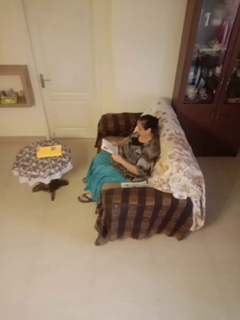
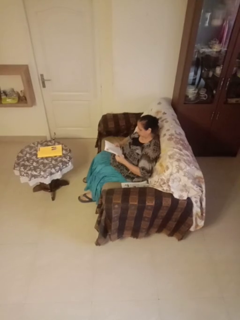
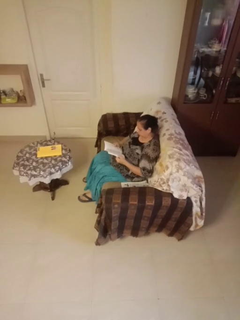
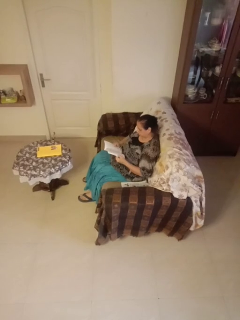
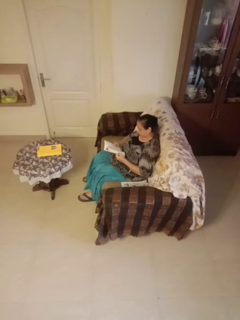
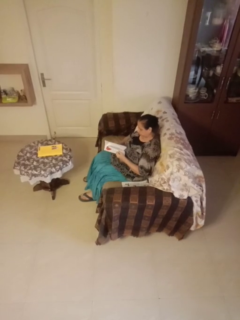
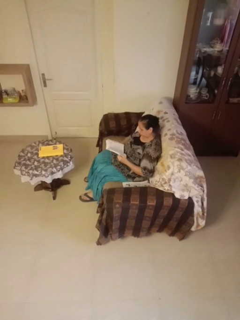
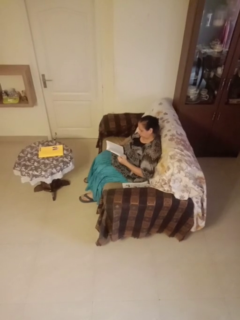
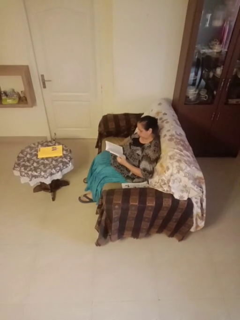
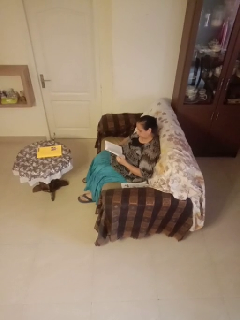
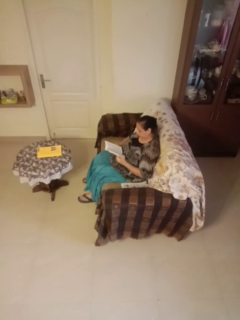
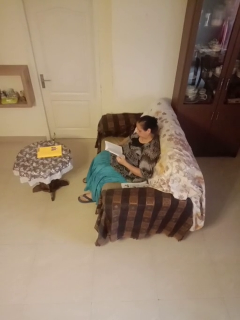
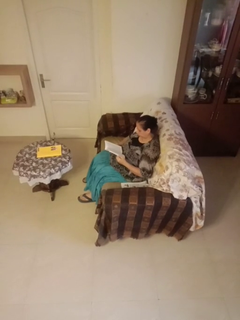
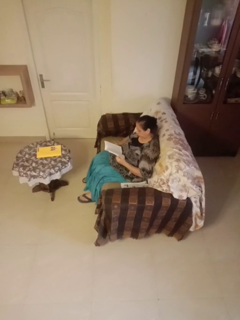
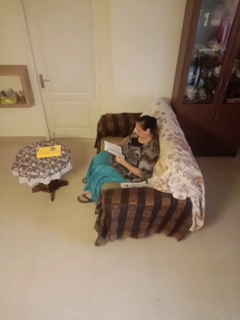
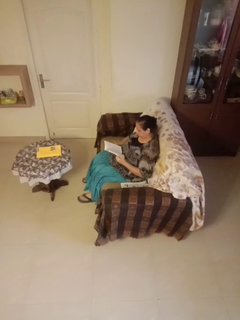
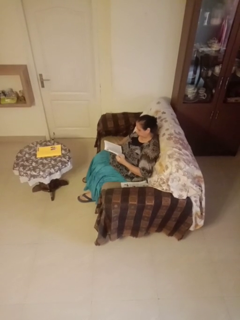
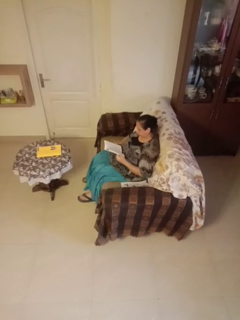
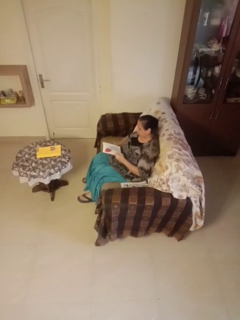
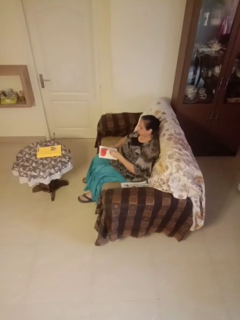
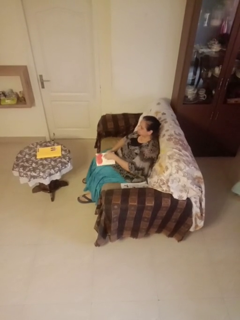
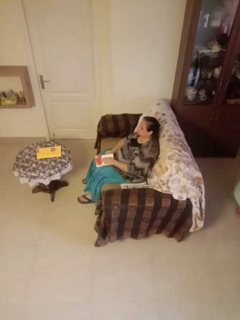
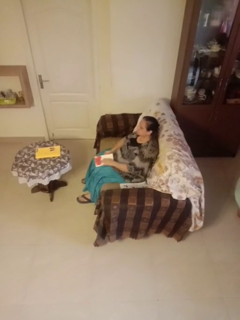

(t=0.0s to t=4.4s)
person reads book

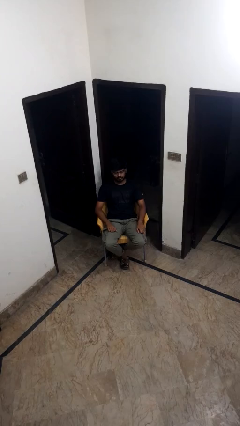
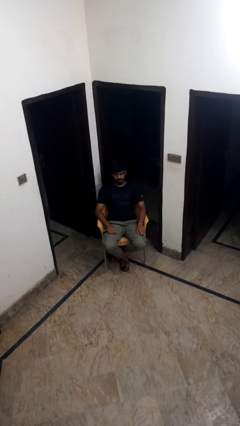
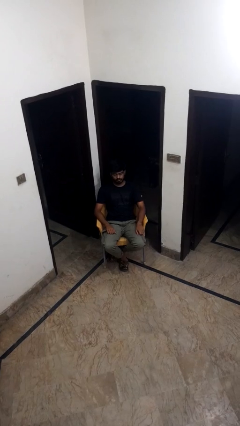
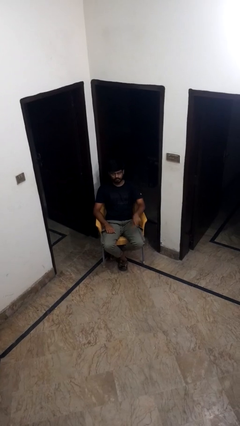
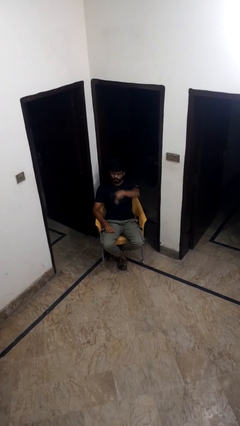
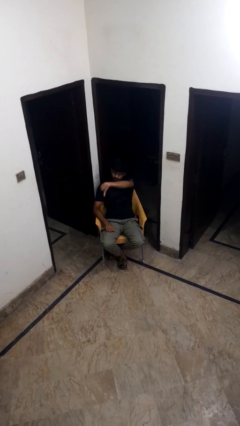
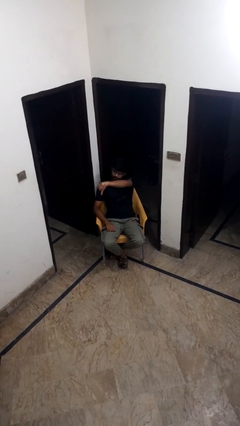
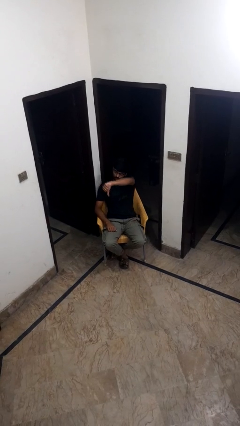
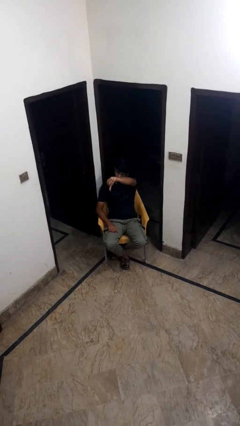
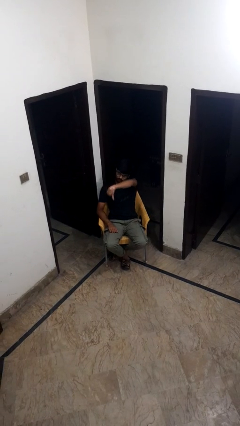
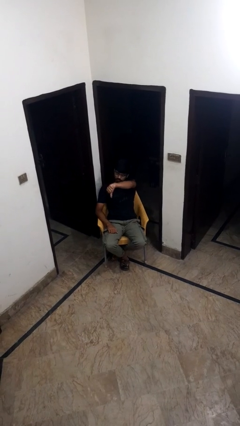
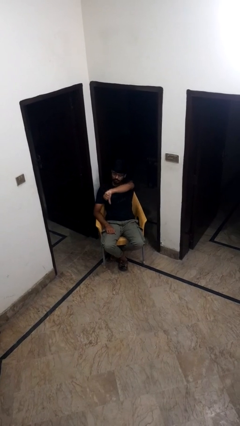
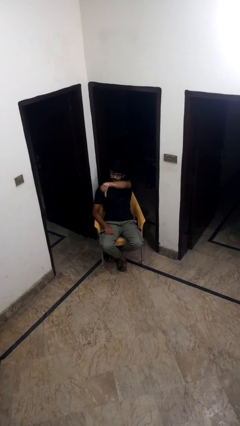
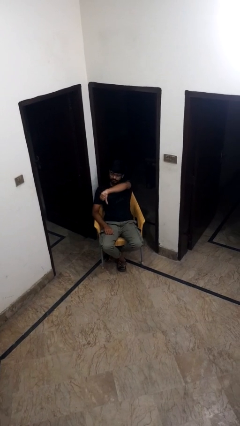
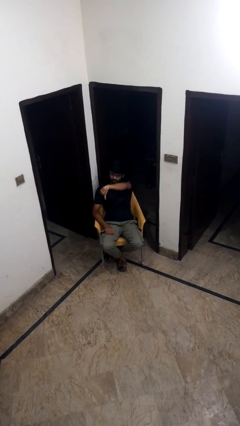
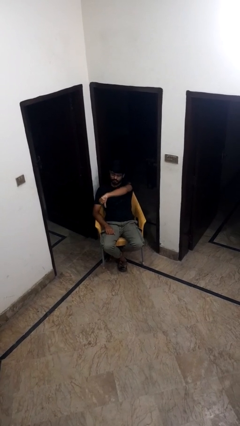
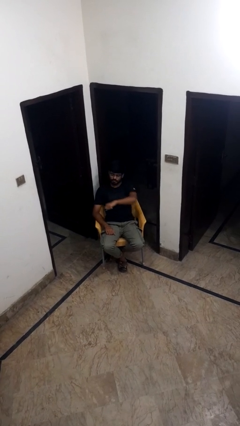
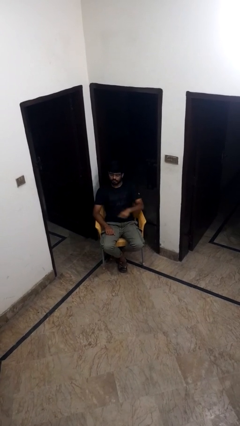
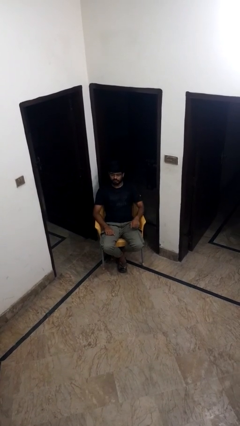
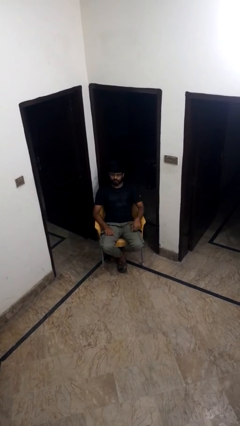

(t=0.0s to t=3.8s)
person gestures thumbs down

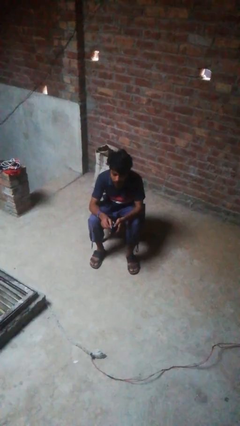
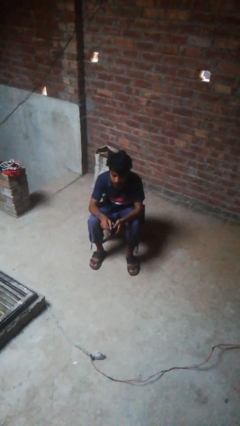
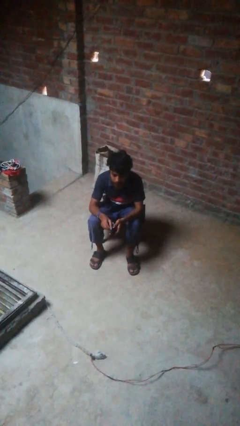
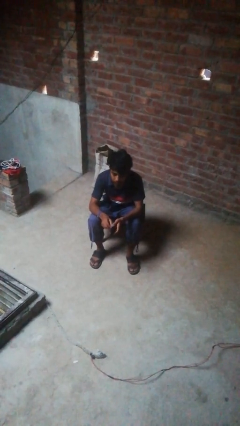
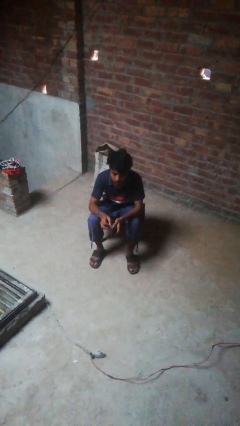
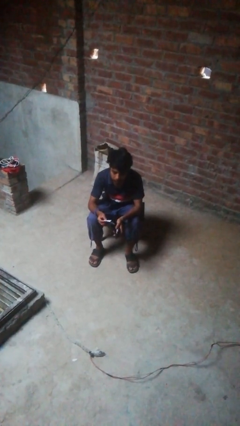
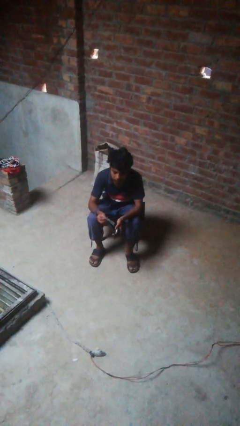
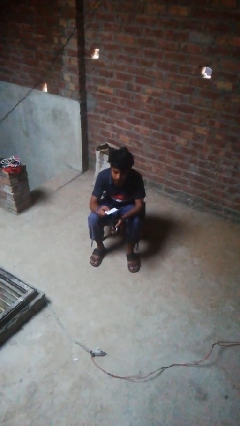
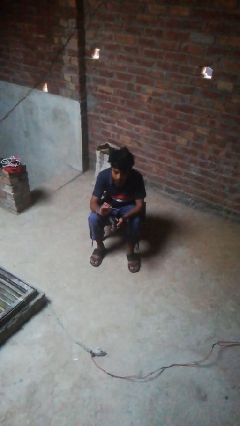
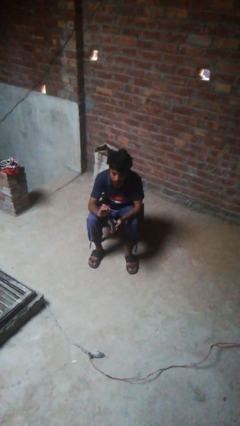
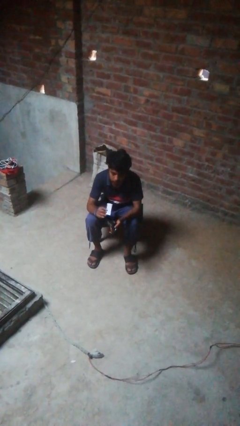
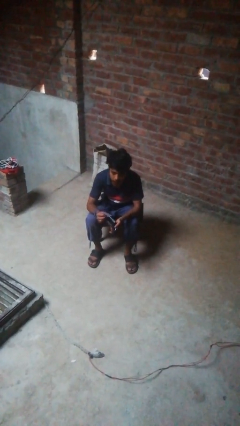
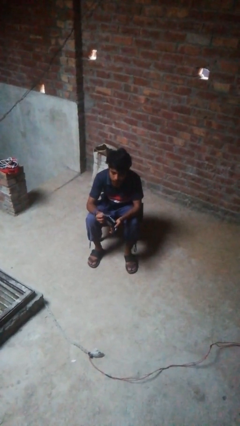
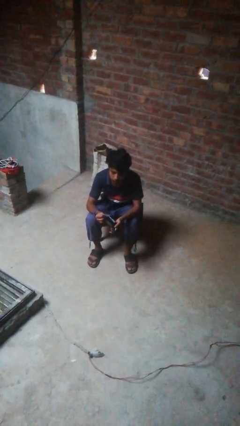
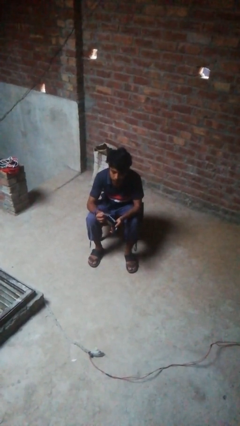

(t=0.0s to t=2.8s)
person takes object from purse

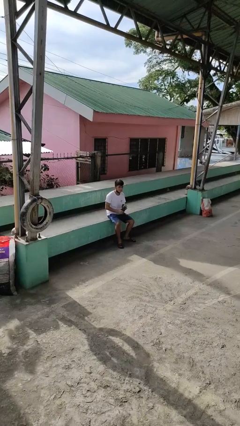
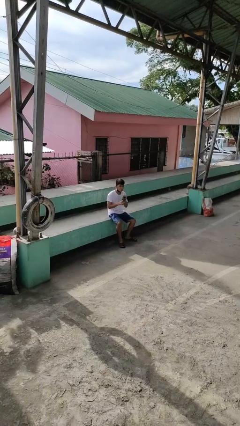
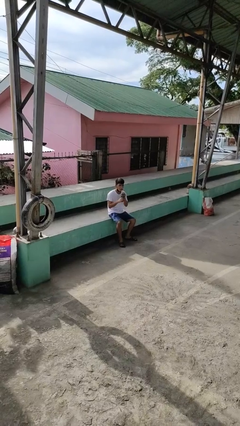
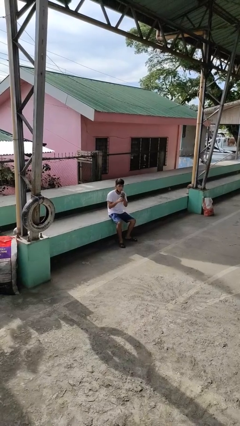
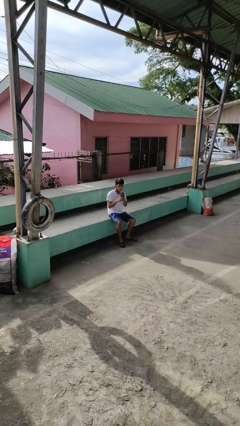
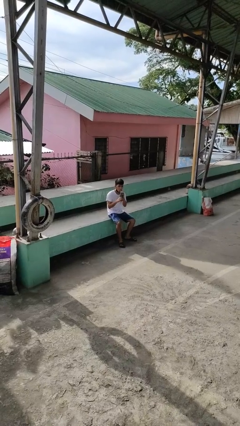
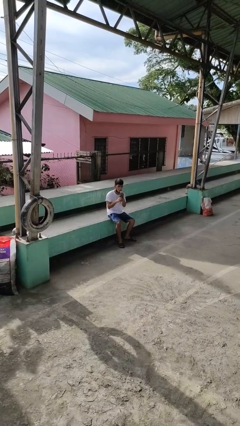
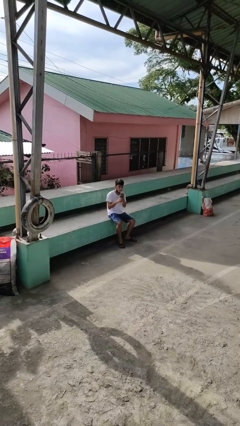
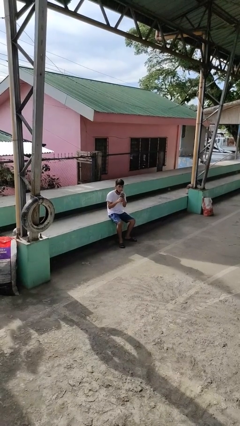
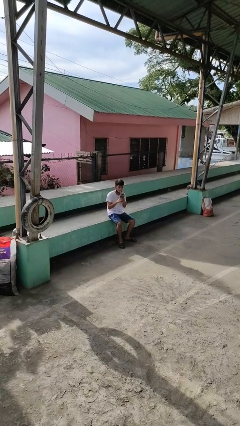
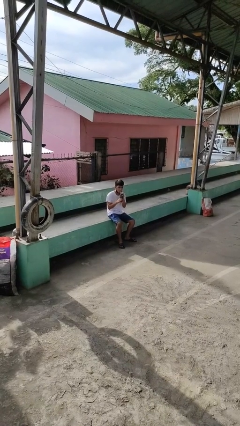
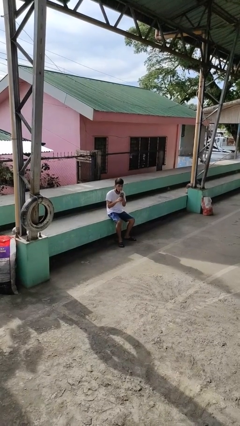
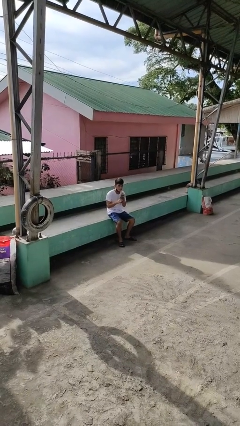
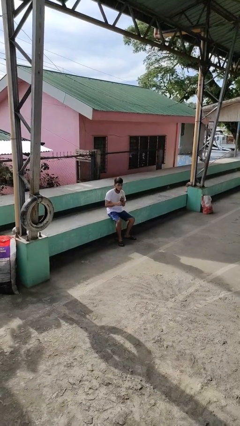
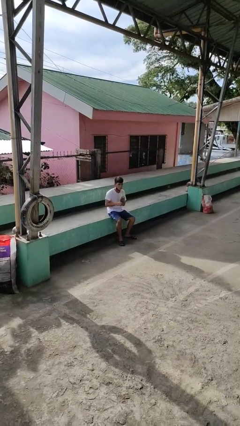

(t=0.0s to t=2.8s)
person drinks from straw

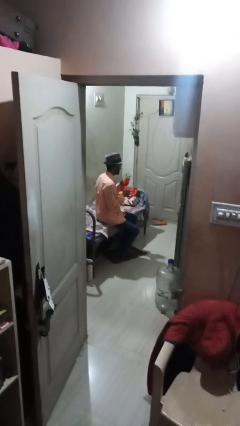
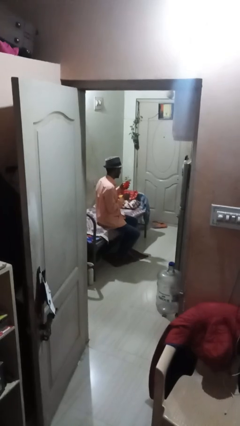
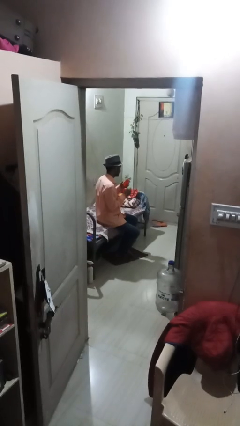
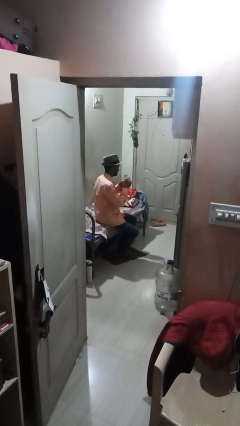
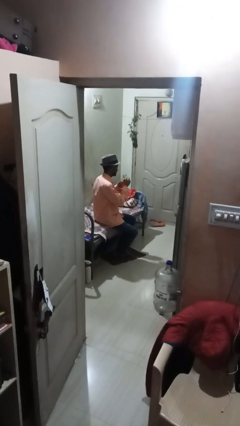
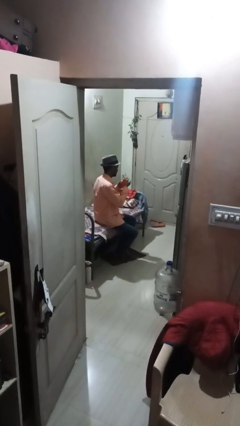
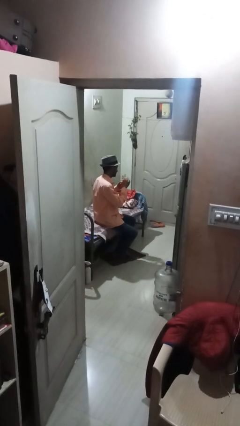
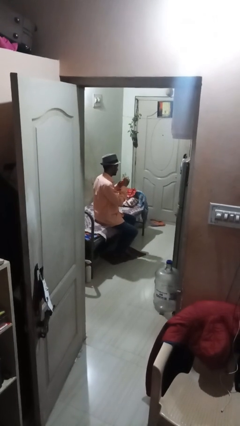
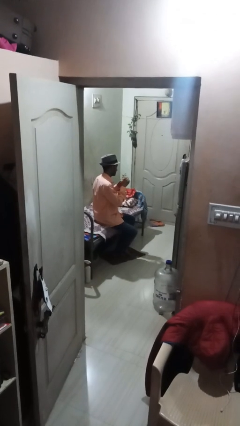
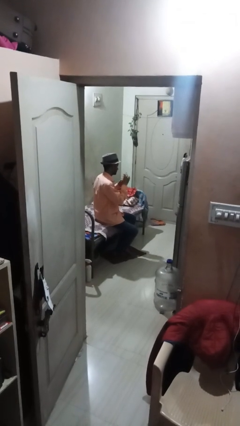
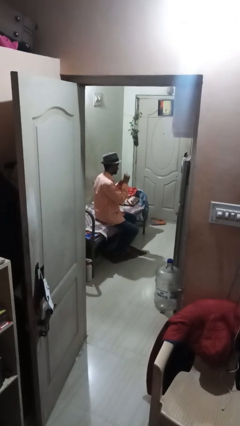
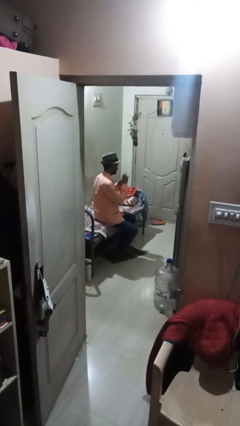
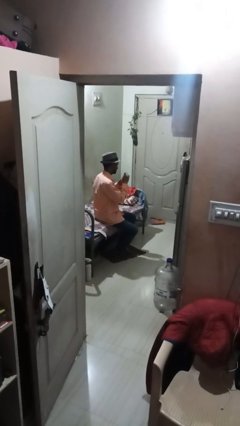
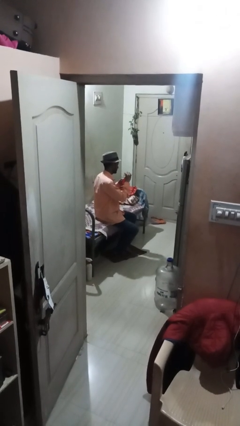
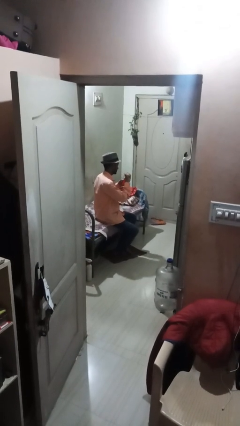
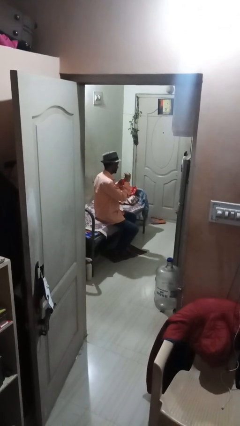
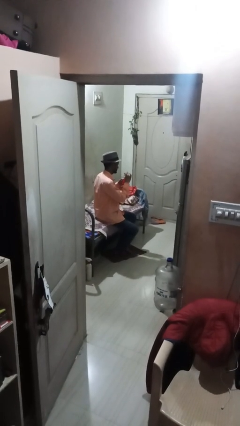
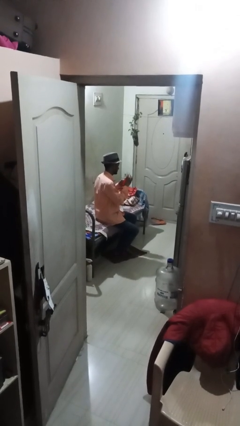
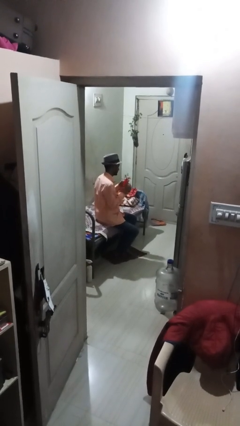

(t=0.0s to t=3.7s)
person arranges flowers in vase

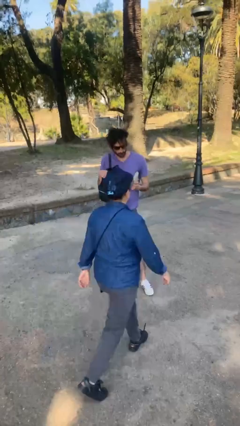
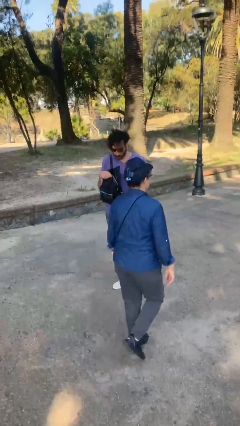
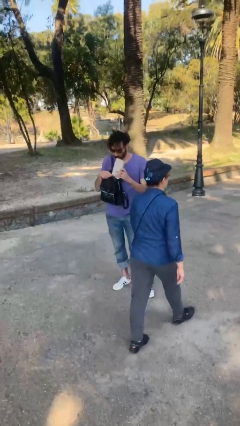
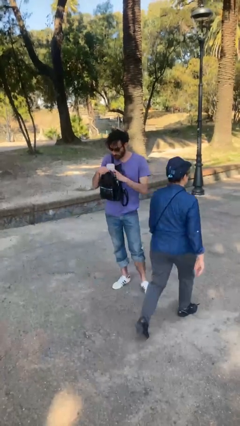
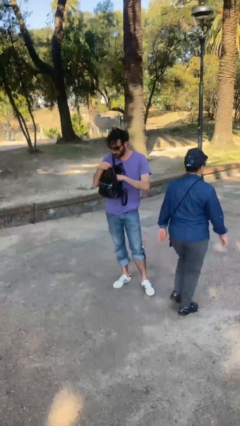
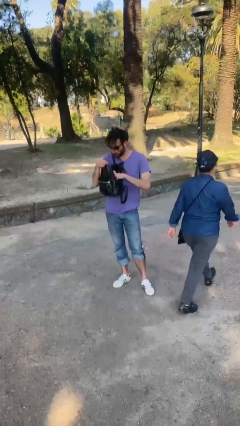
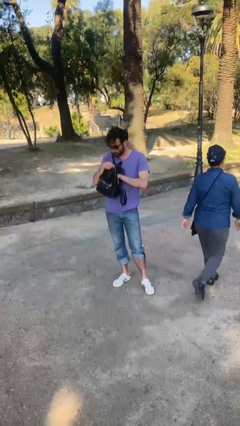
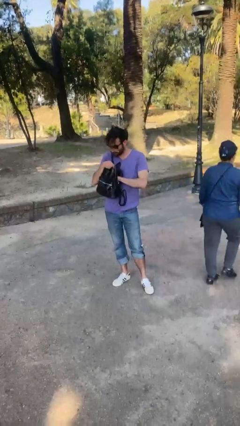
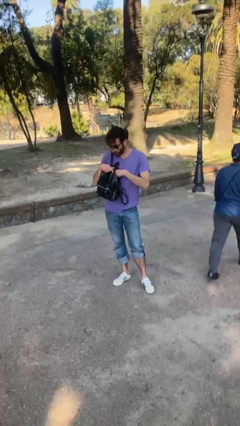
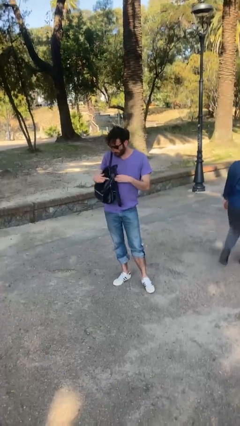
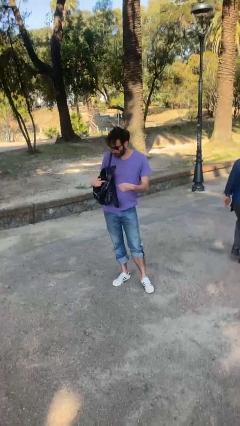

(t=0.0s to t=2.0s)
person puts object into purse
